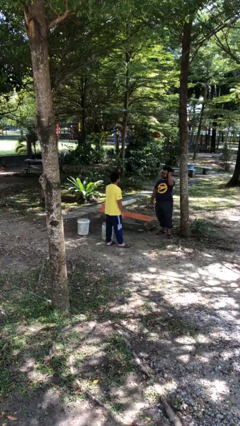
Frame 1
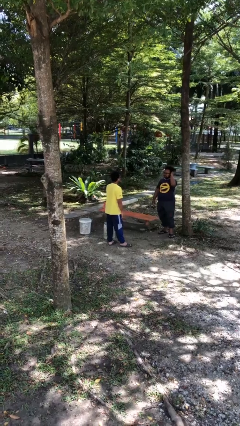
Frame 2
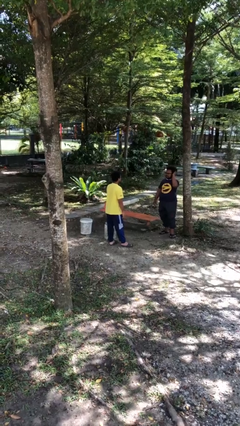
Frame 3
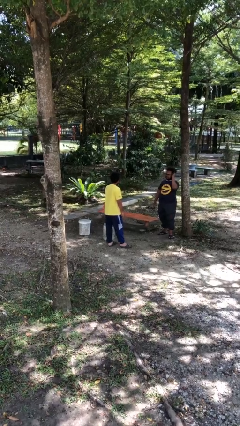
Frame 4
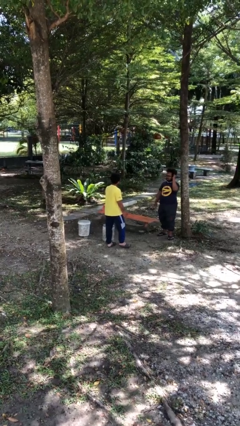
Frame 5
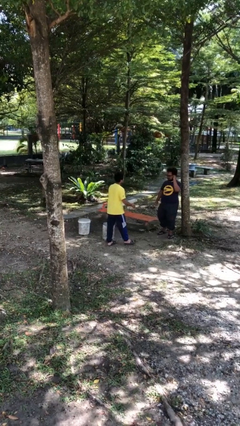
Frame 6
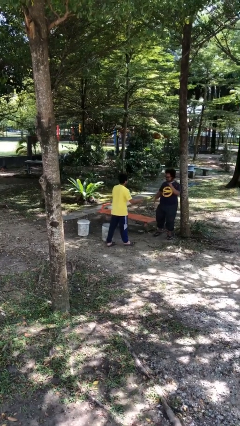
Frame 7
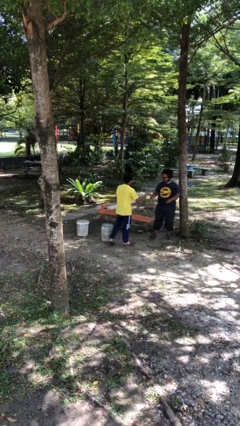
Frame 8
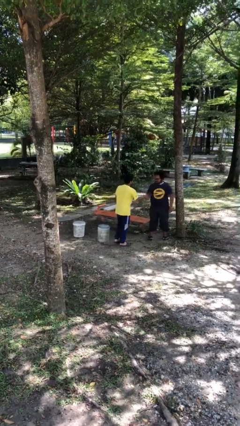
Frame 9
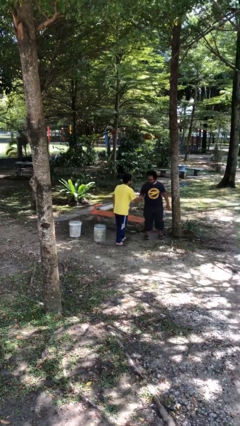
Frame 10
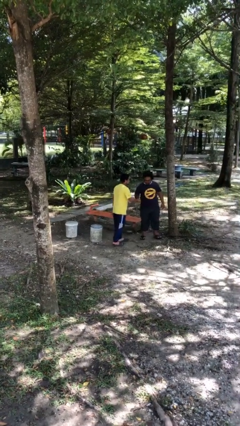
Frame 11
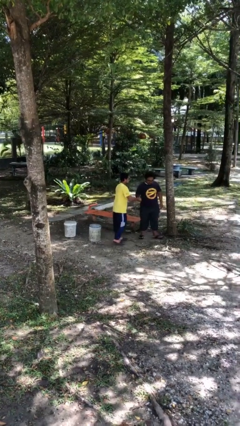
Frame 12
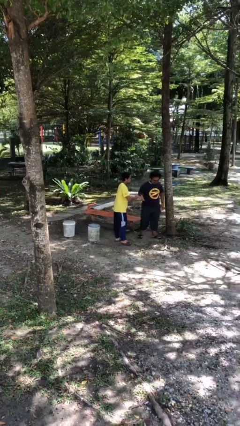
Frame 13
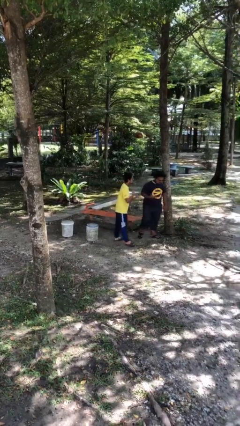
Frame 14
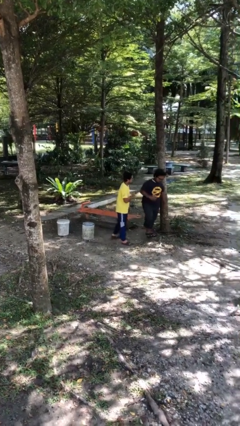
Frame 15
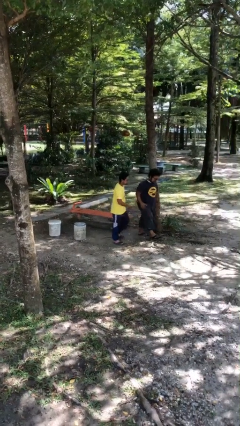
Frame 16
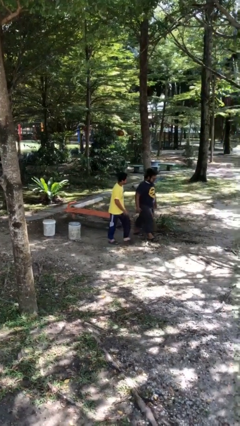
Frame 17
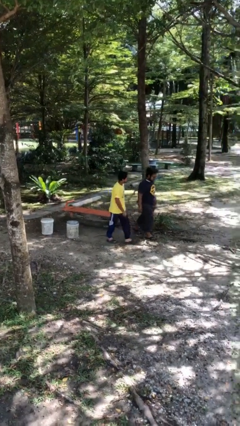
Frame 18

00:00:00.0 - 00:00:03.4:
person shakes hand

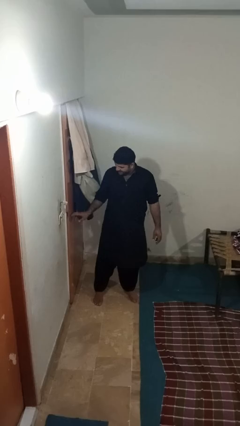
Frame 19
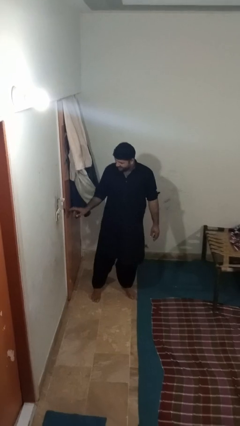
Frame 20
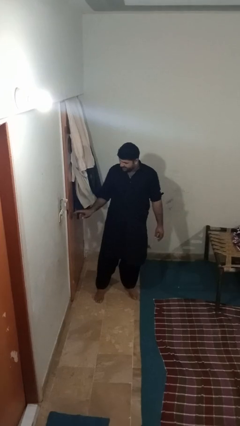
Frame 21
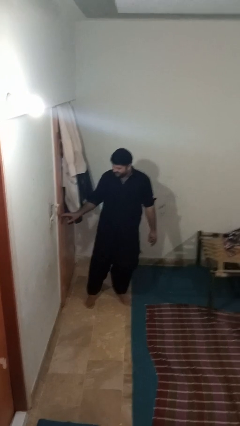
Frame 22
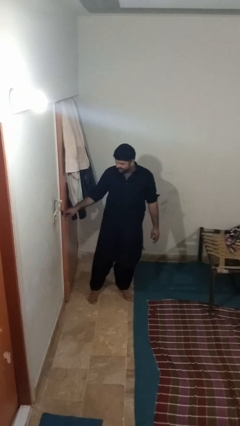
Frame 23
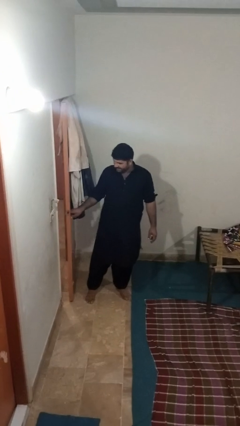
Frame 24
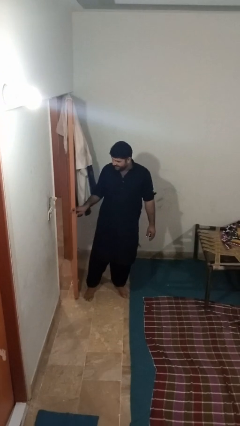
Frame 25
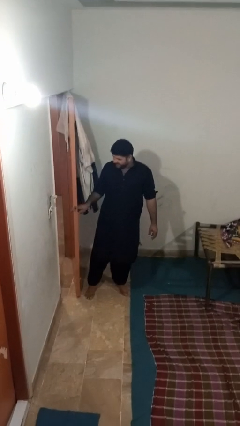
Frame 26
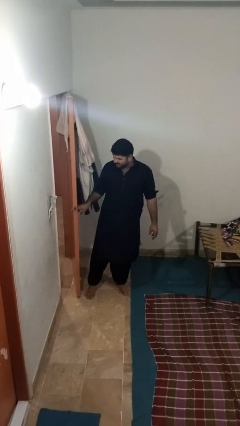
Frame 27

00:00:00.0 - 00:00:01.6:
person opens facility door

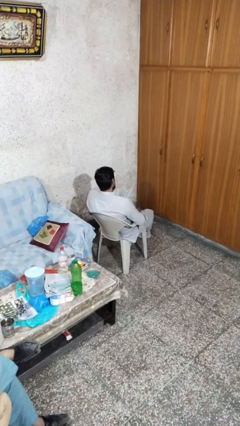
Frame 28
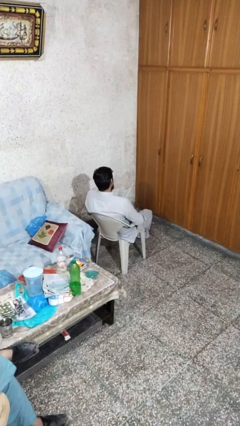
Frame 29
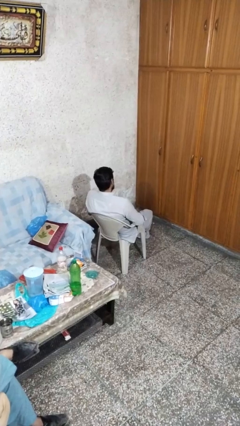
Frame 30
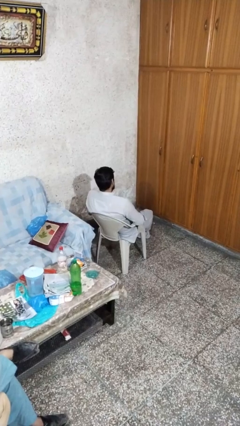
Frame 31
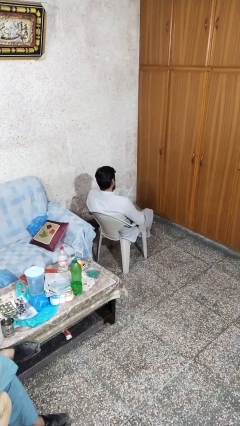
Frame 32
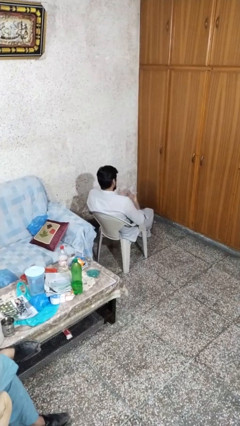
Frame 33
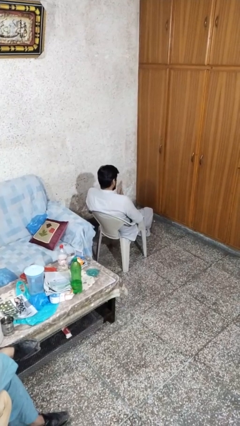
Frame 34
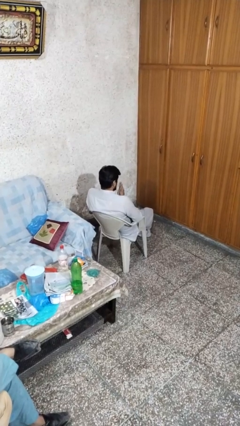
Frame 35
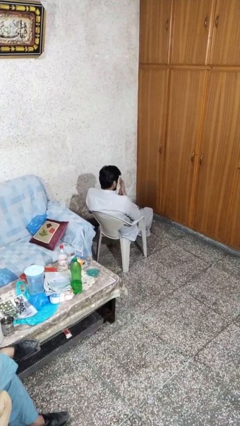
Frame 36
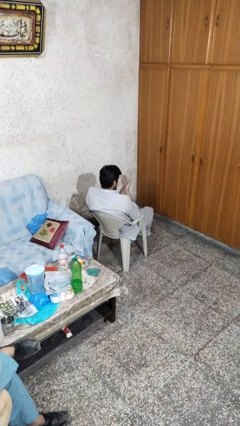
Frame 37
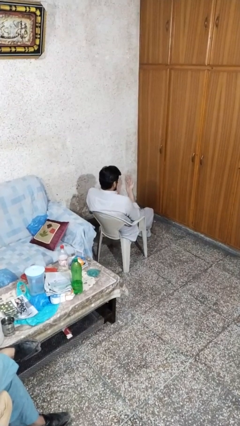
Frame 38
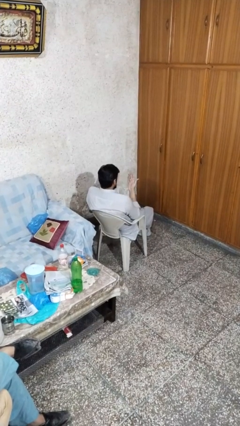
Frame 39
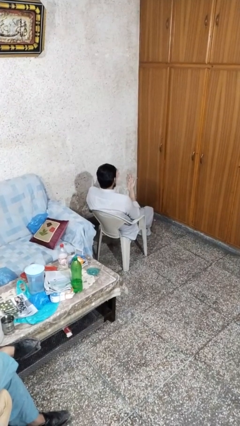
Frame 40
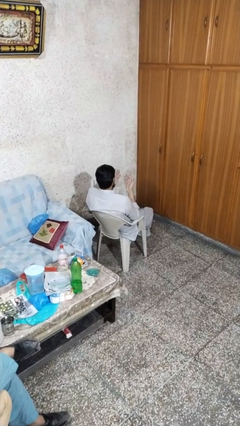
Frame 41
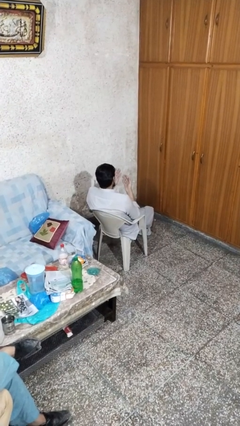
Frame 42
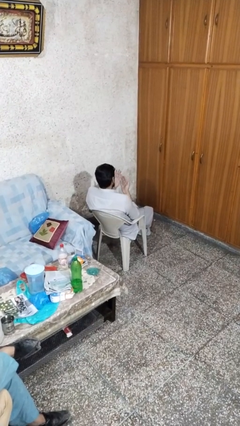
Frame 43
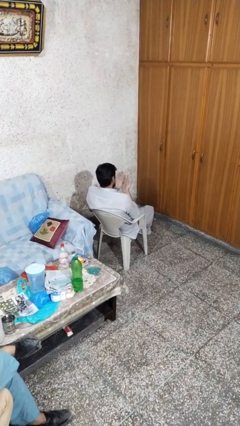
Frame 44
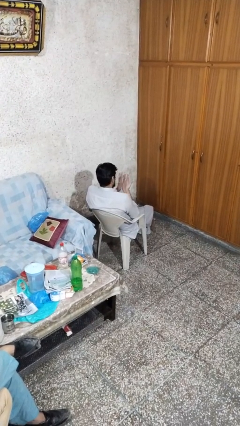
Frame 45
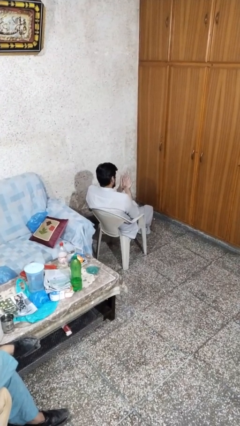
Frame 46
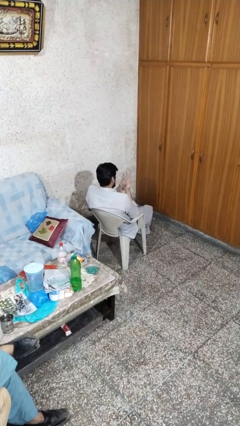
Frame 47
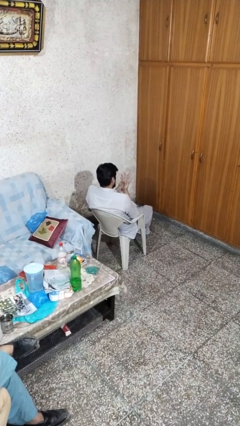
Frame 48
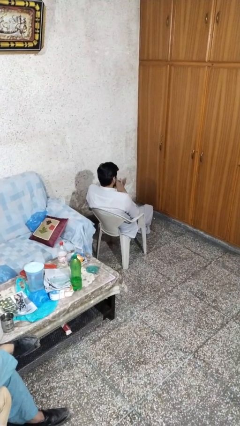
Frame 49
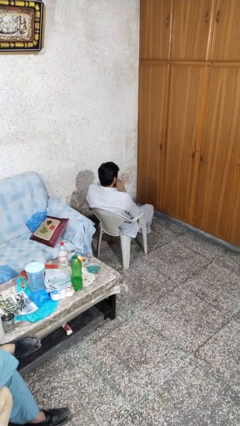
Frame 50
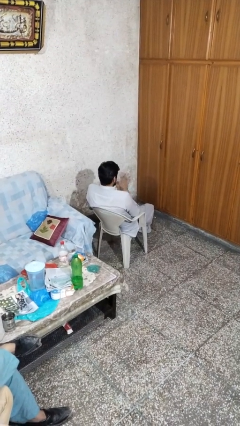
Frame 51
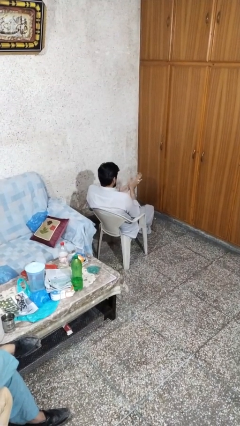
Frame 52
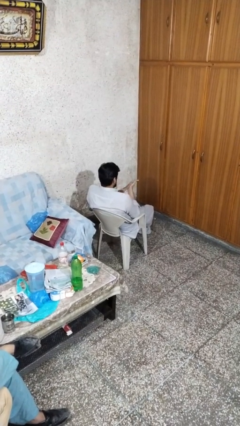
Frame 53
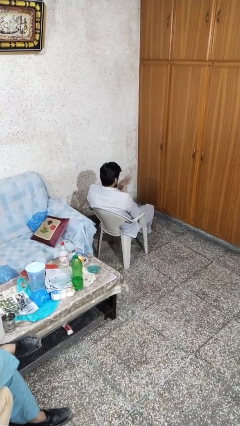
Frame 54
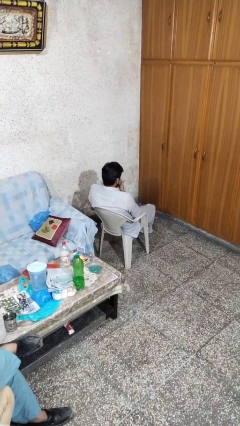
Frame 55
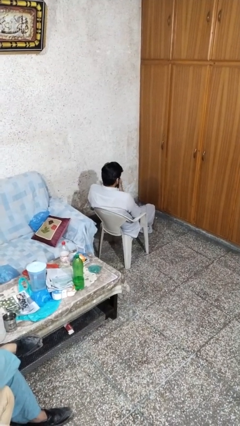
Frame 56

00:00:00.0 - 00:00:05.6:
person looks at hands in lap

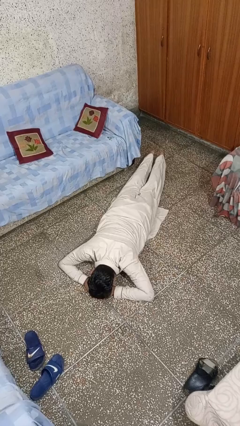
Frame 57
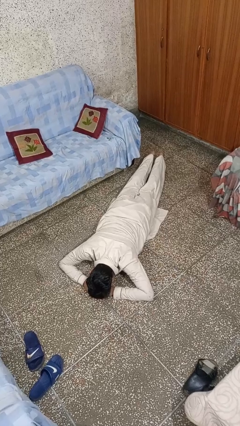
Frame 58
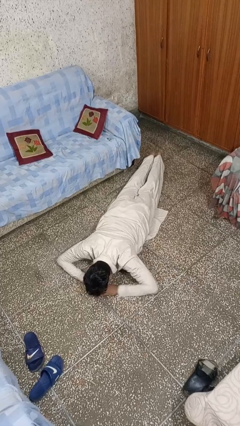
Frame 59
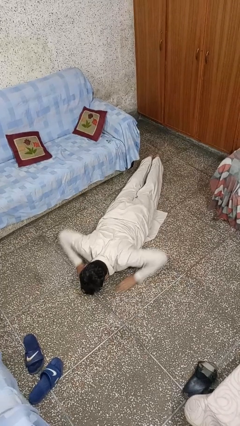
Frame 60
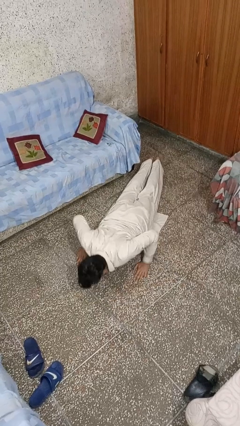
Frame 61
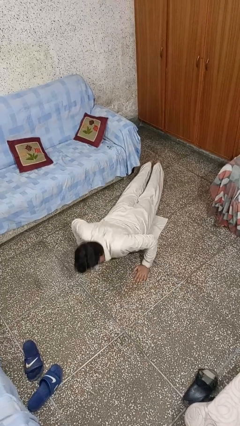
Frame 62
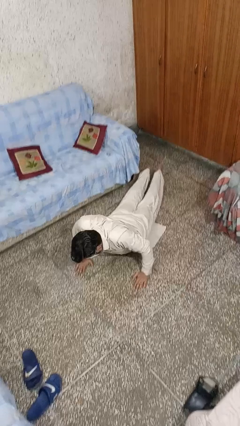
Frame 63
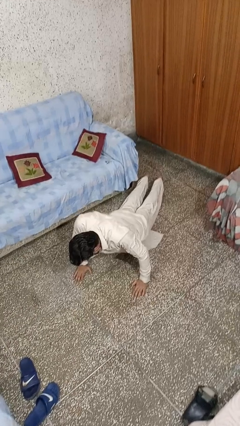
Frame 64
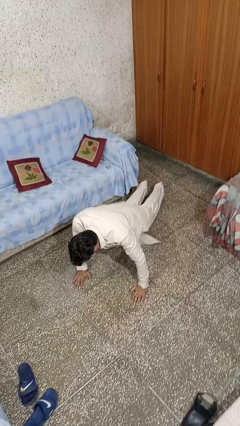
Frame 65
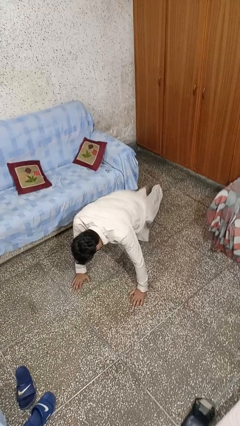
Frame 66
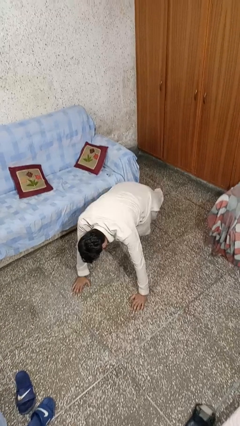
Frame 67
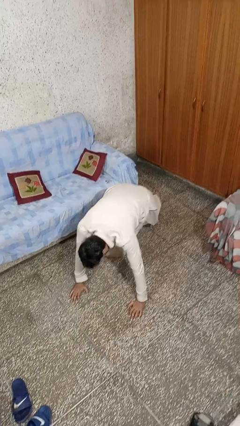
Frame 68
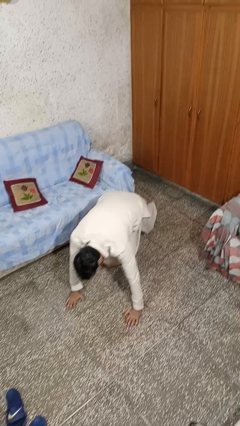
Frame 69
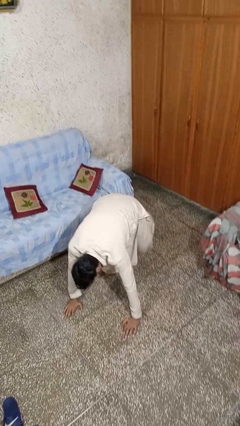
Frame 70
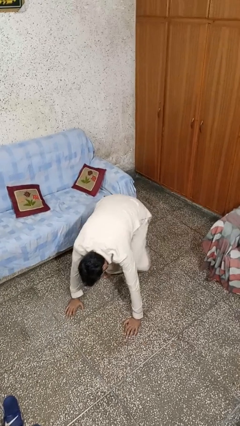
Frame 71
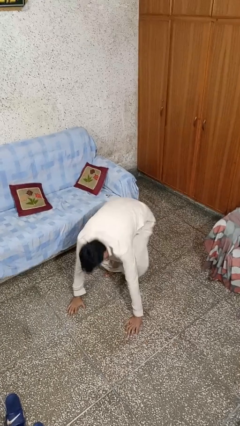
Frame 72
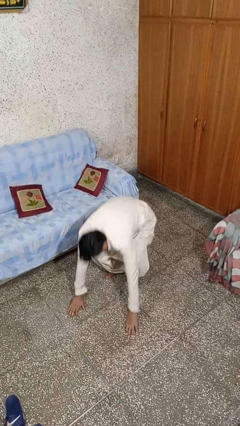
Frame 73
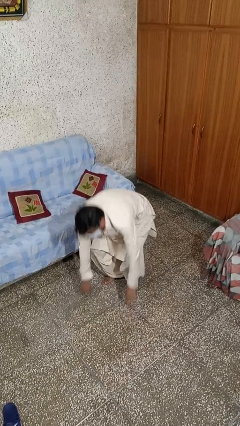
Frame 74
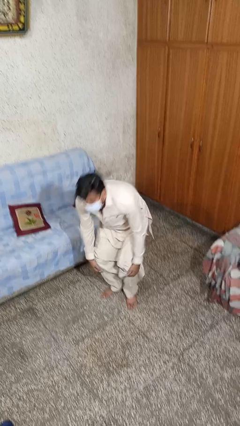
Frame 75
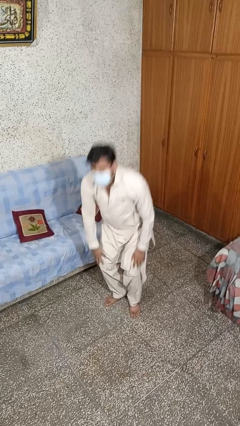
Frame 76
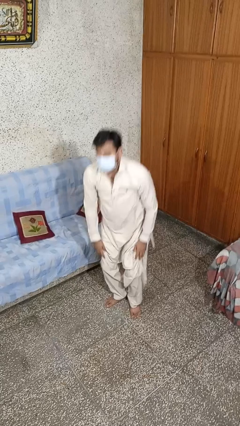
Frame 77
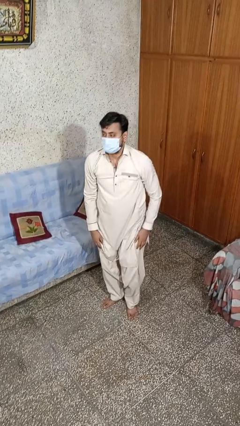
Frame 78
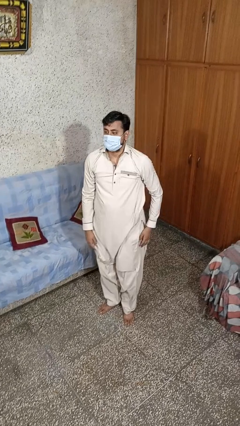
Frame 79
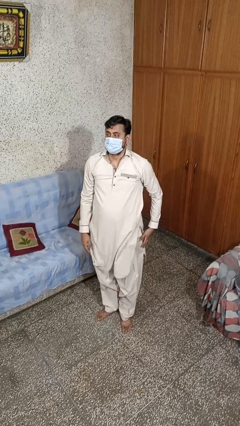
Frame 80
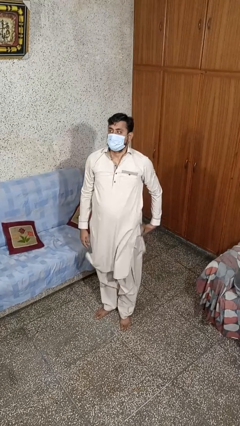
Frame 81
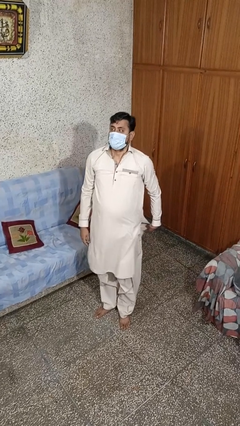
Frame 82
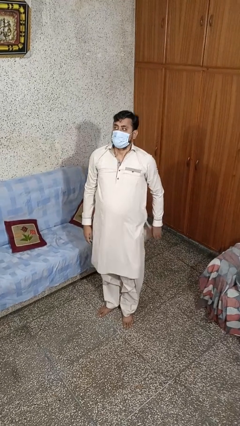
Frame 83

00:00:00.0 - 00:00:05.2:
person stands up from floor

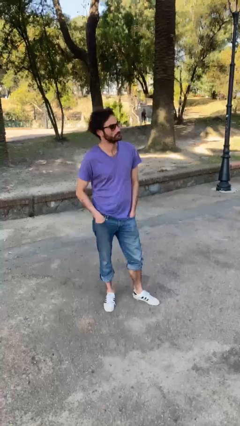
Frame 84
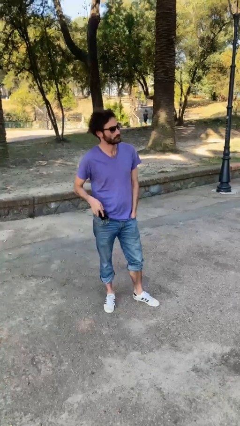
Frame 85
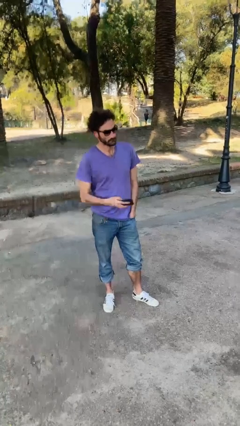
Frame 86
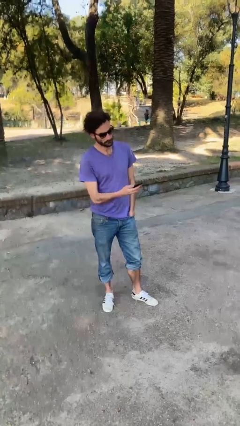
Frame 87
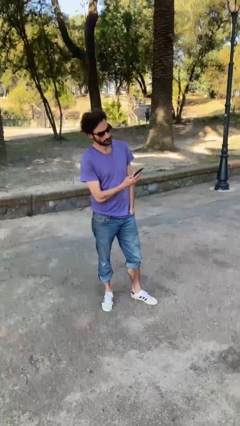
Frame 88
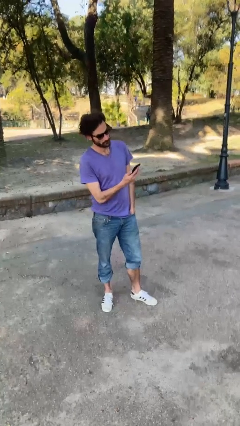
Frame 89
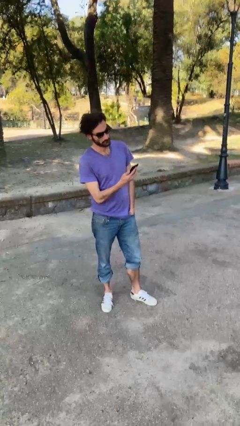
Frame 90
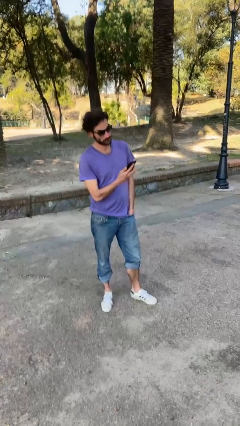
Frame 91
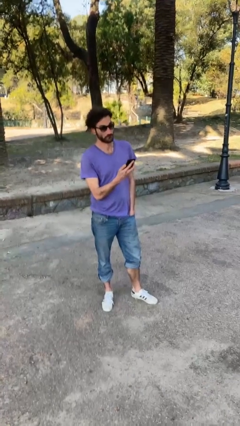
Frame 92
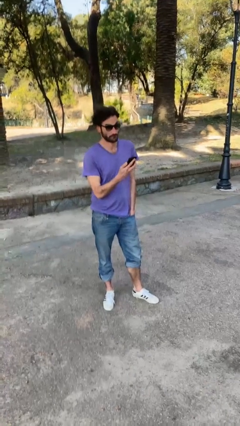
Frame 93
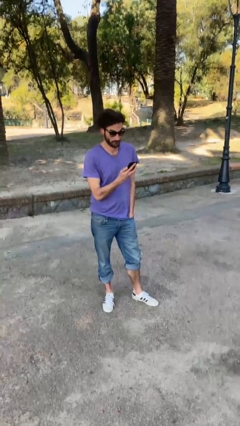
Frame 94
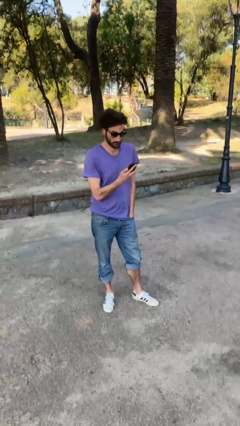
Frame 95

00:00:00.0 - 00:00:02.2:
person takes phone from pocket
